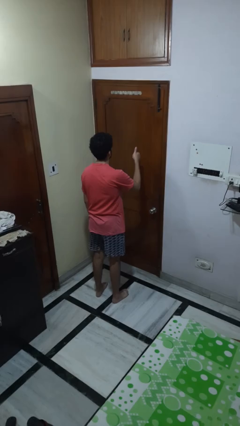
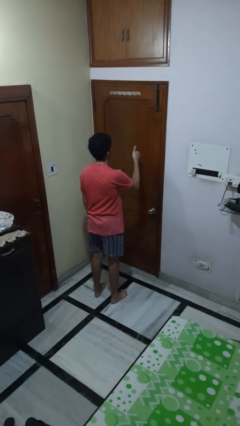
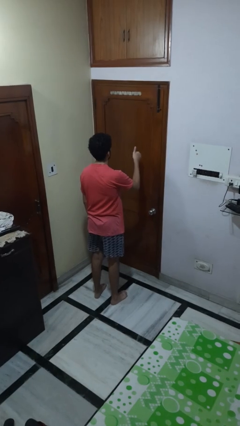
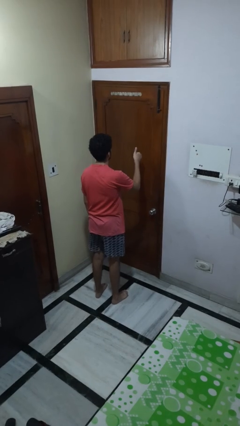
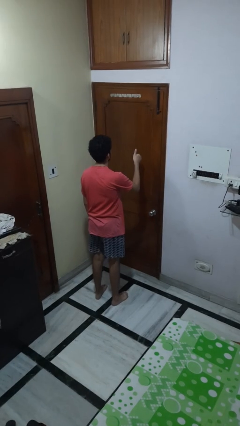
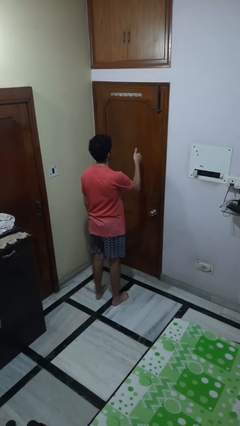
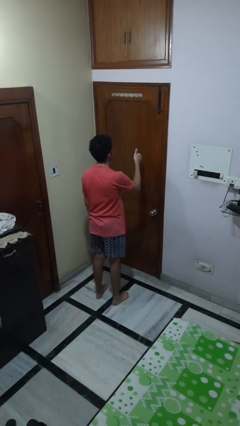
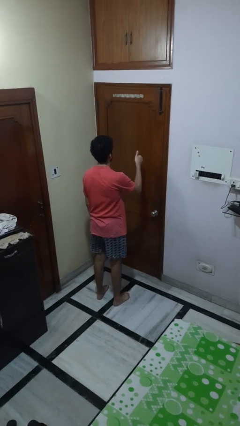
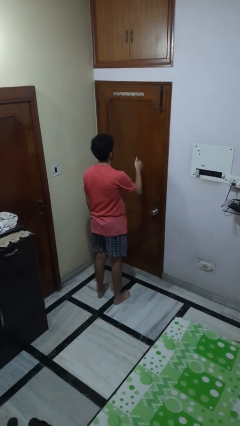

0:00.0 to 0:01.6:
person gestures hang loose

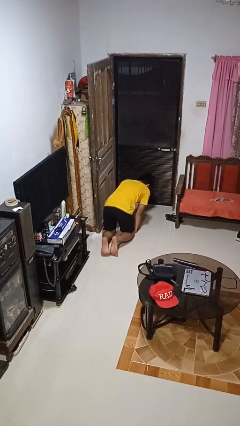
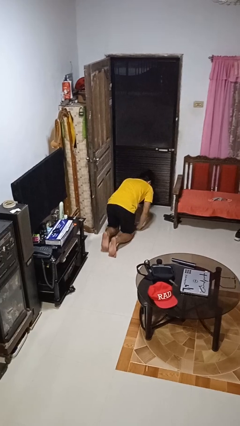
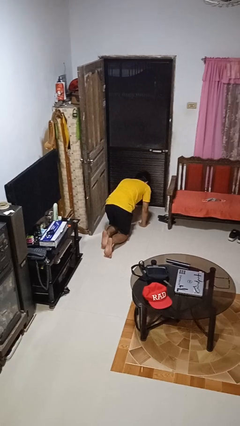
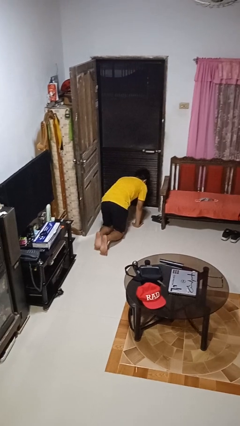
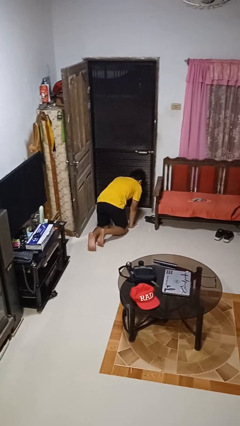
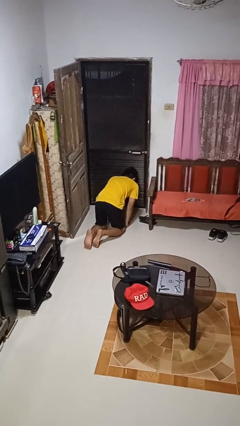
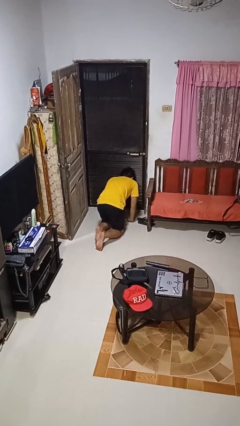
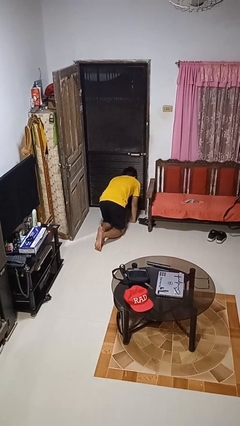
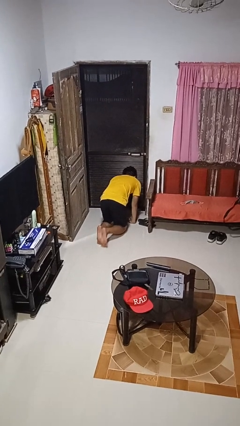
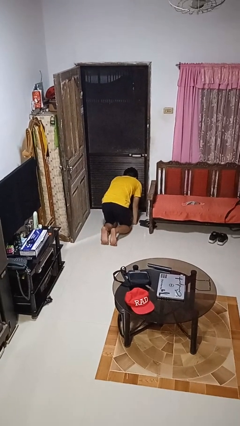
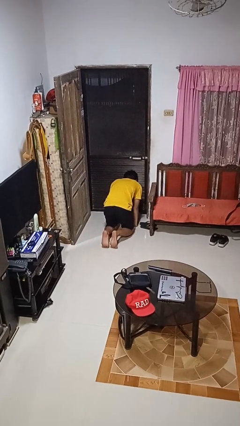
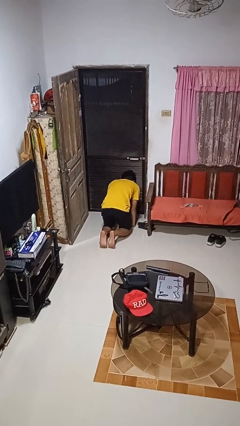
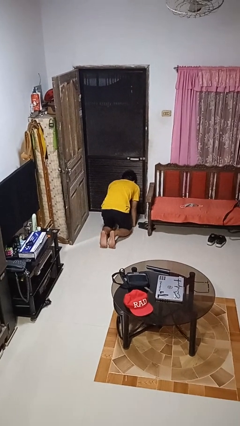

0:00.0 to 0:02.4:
person crawls

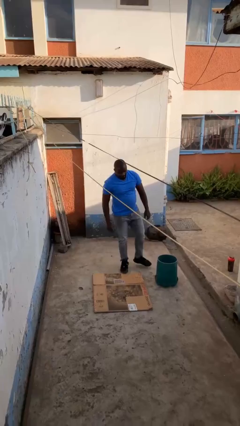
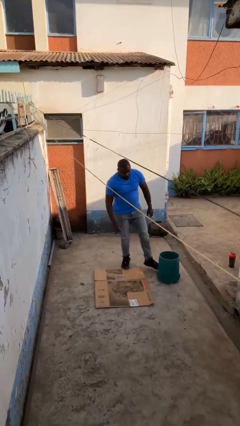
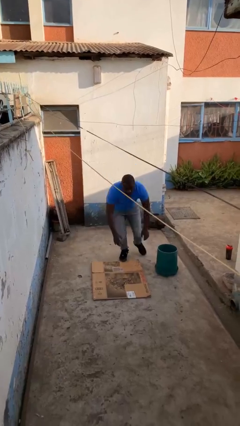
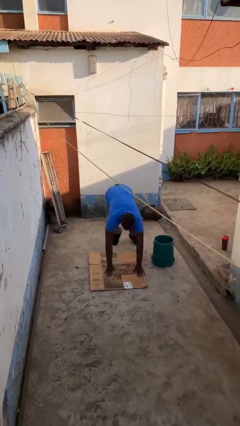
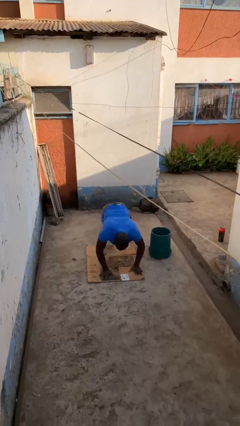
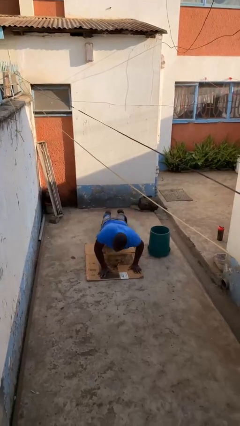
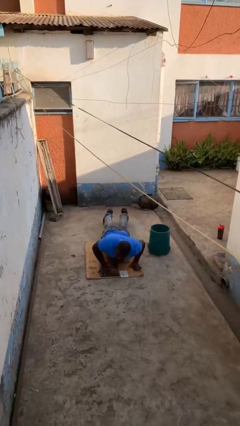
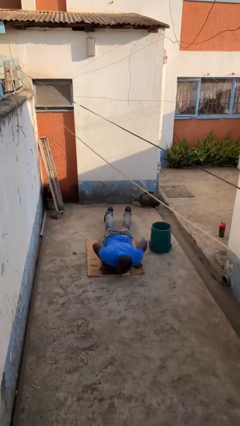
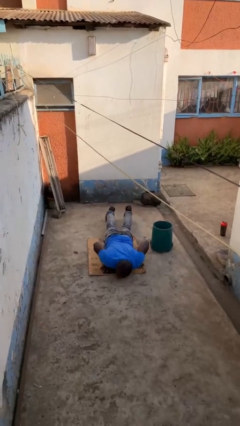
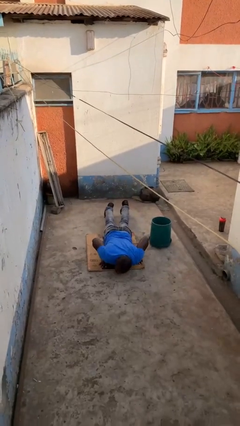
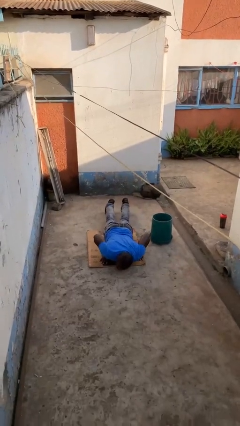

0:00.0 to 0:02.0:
person trips on object on floor

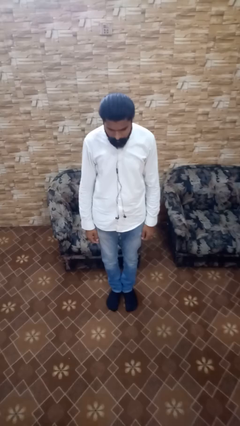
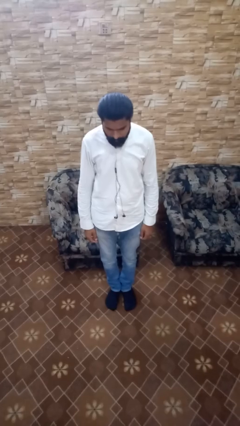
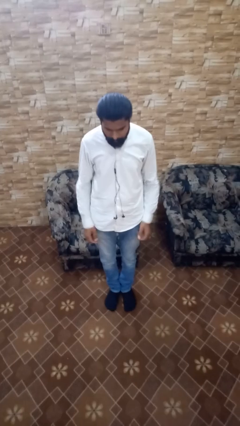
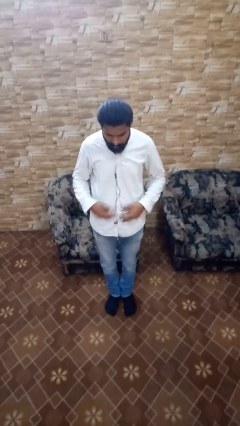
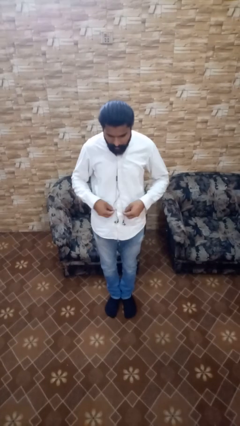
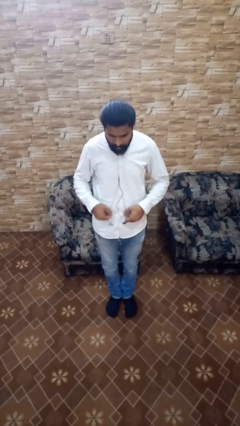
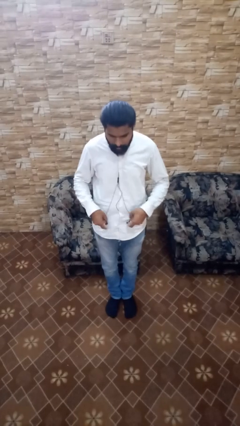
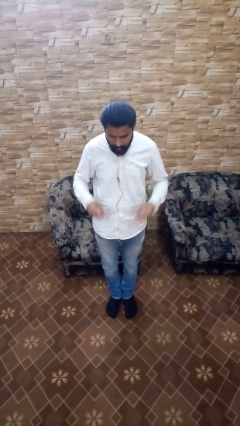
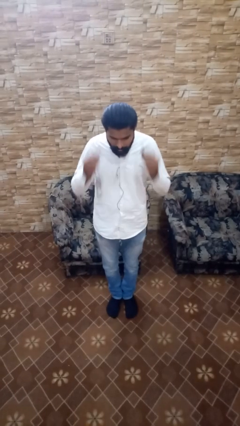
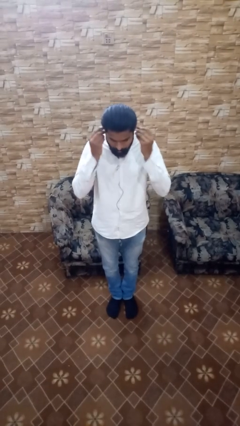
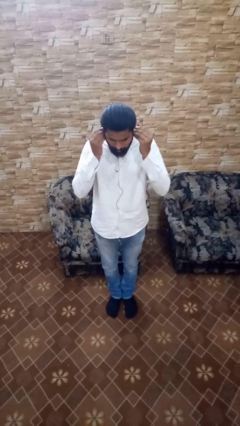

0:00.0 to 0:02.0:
person puts on headphones

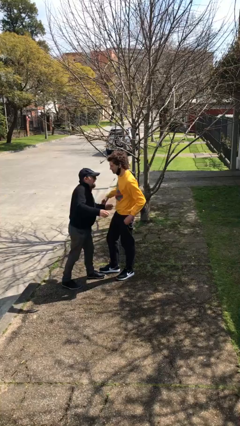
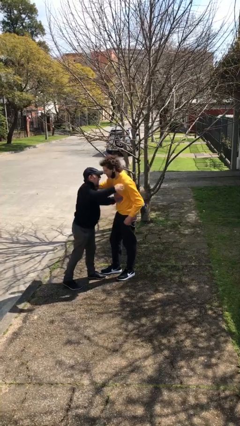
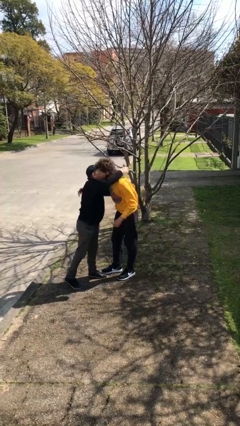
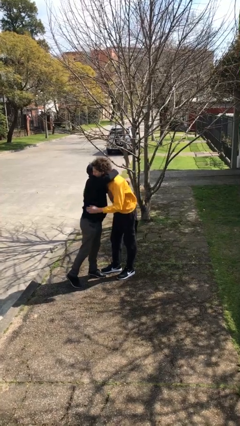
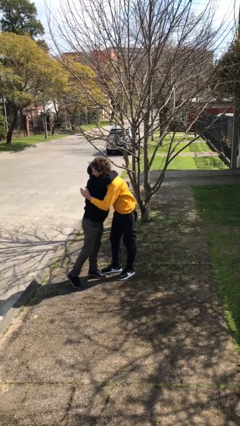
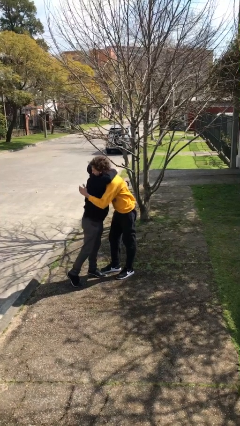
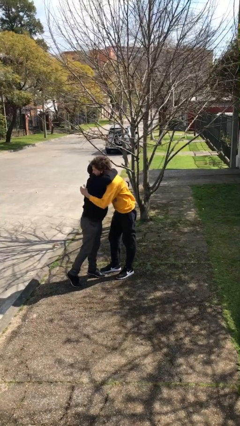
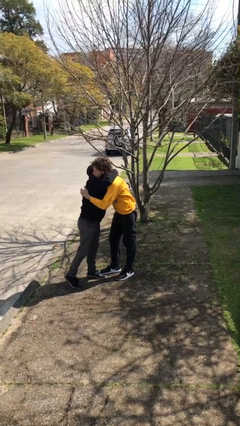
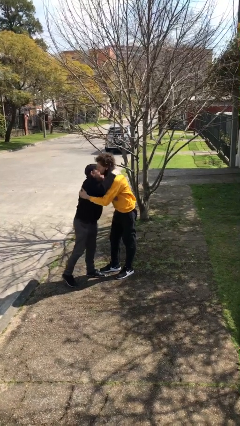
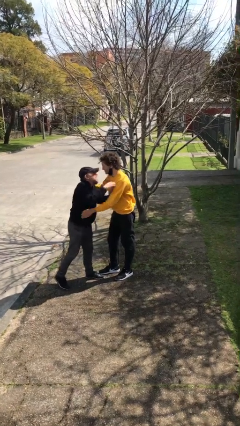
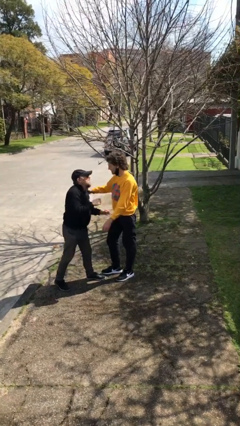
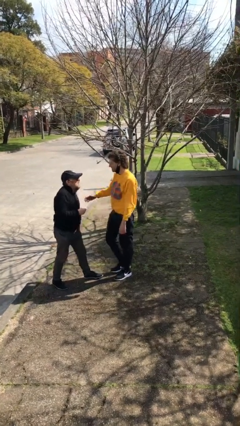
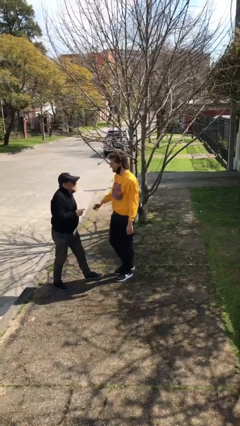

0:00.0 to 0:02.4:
person embraces person

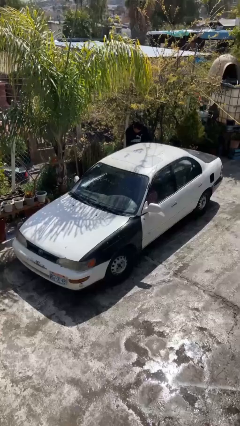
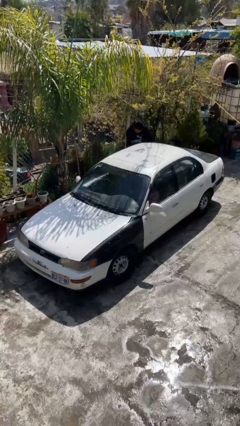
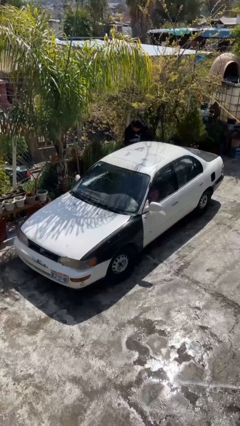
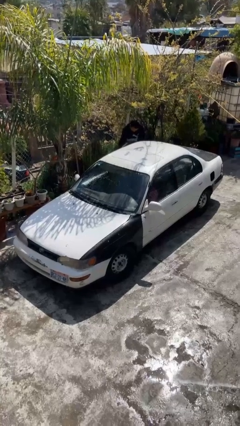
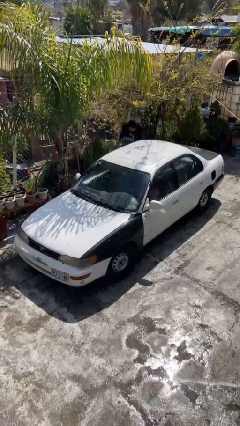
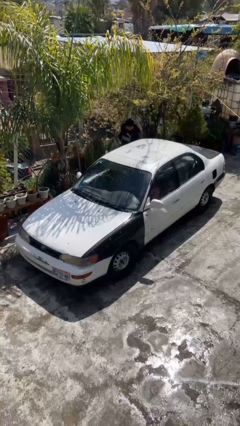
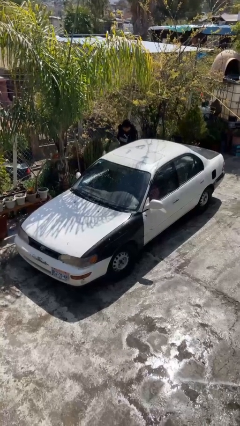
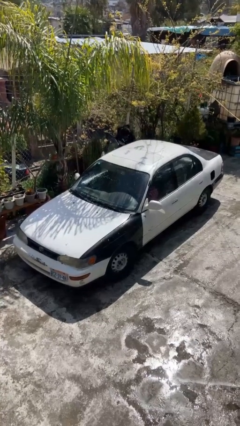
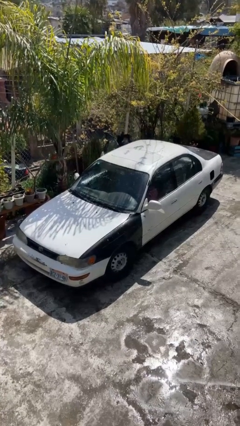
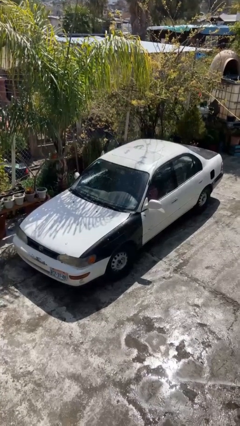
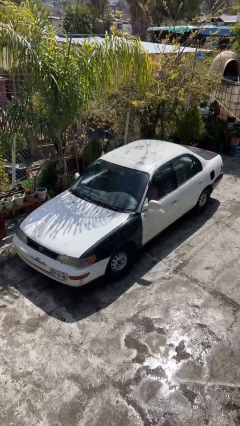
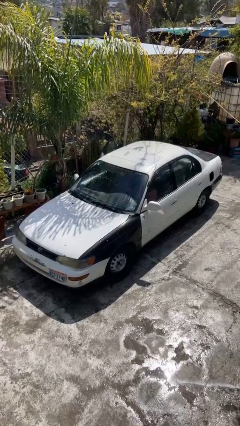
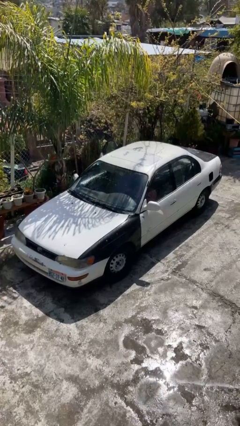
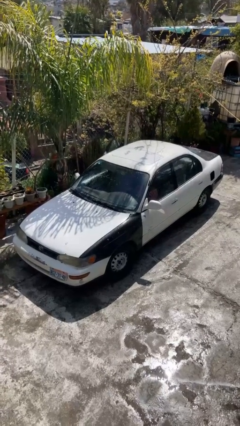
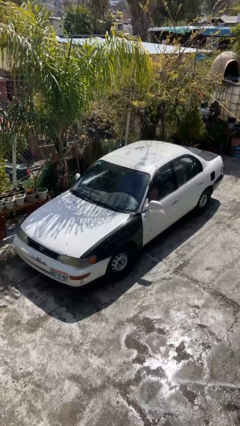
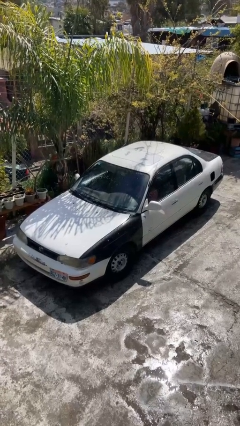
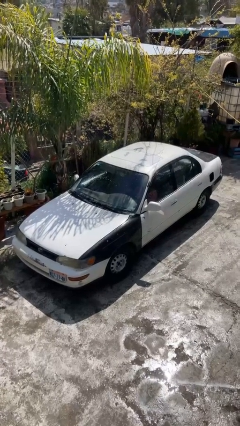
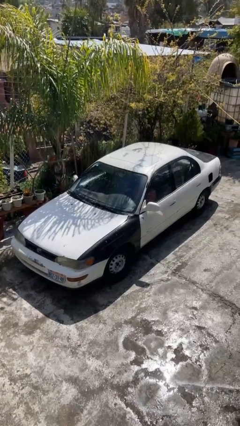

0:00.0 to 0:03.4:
car picks up person

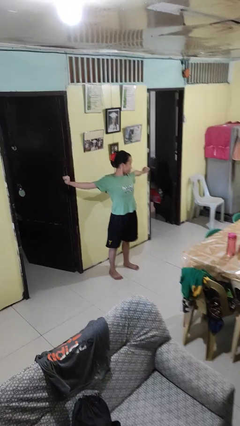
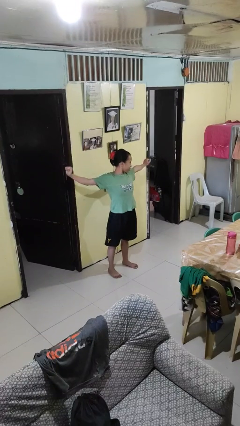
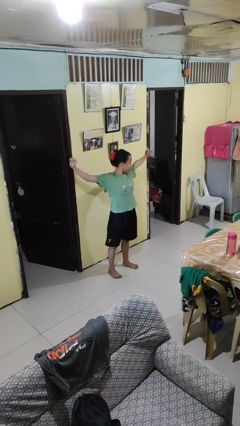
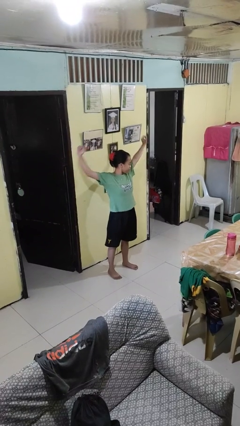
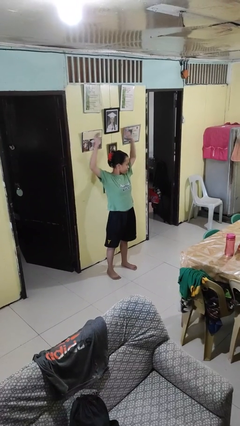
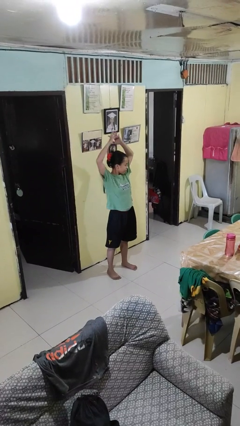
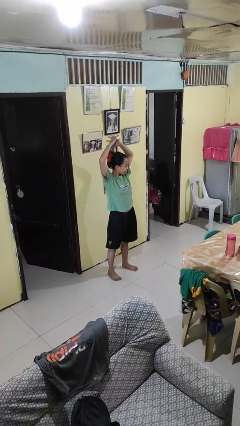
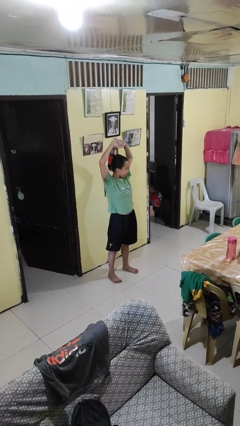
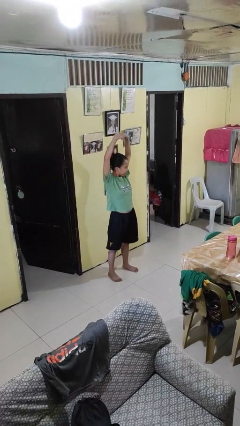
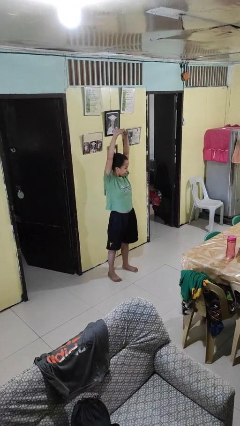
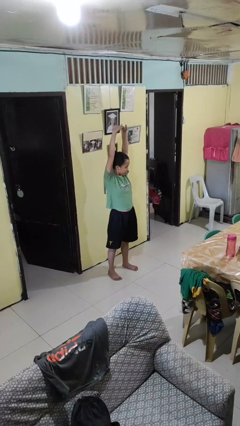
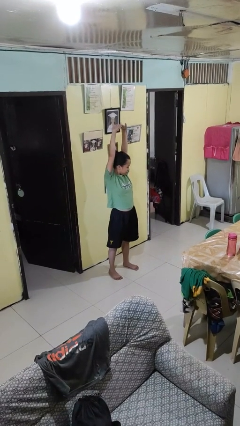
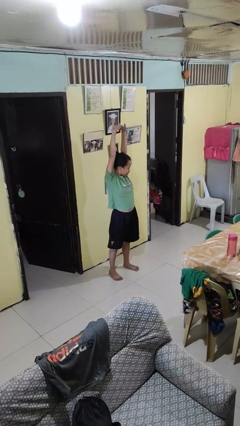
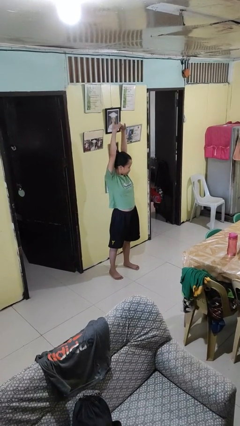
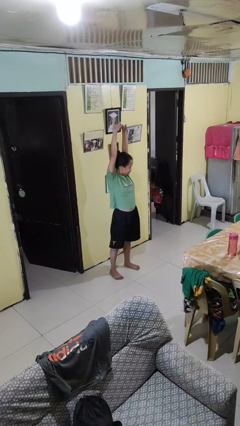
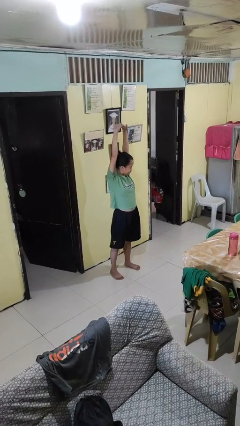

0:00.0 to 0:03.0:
person stretches arms over head
